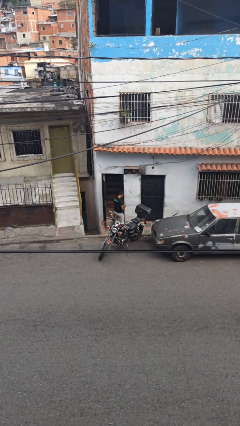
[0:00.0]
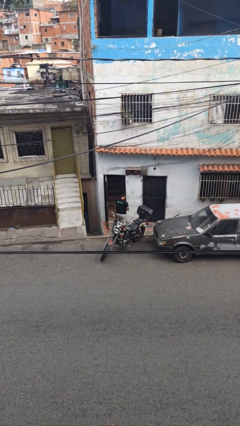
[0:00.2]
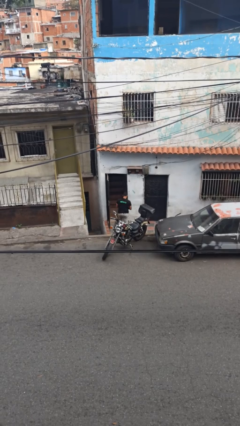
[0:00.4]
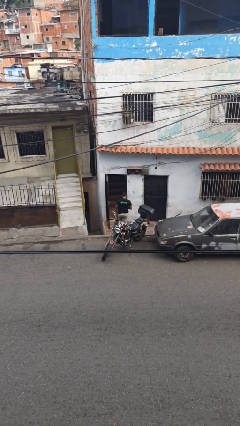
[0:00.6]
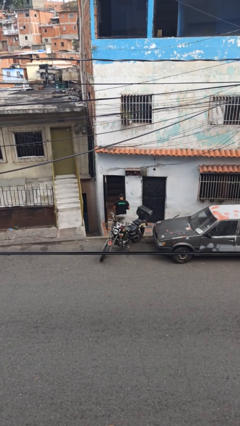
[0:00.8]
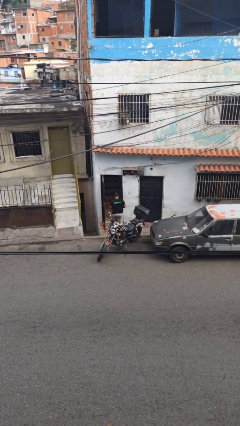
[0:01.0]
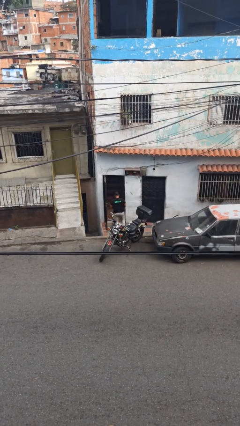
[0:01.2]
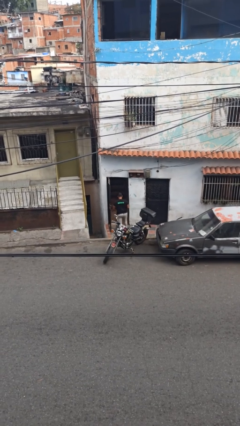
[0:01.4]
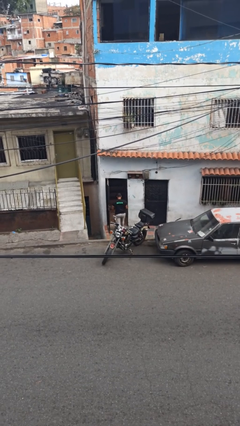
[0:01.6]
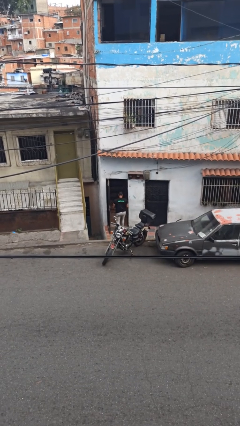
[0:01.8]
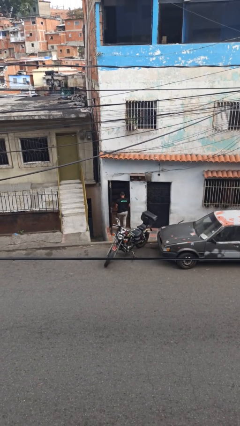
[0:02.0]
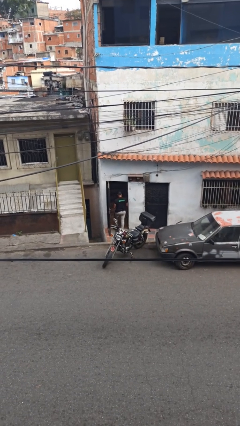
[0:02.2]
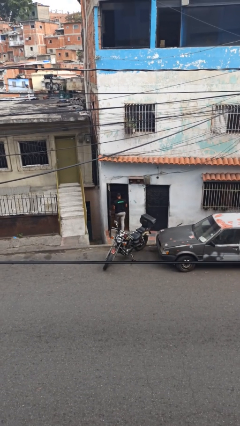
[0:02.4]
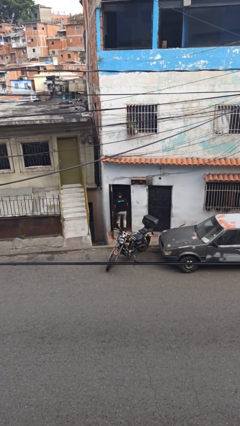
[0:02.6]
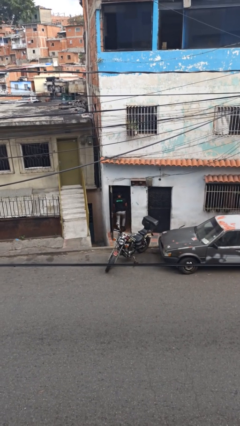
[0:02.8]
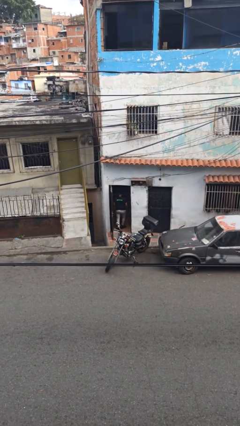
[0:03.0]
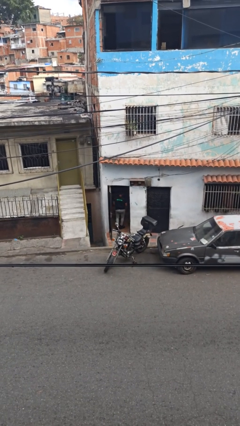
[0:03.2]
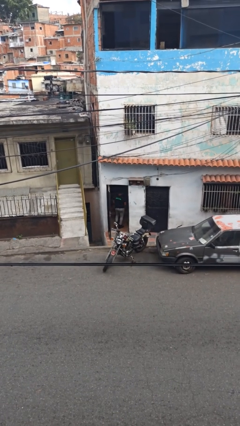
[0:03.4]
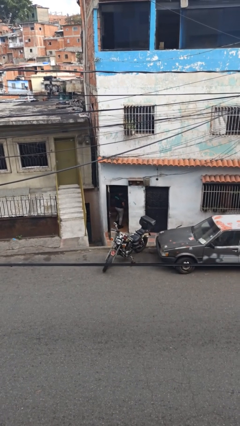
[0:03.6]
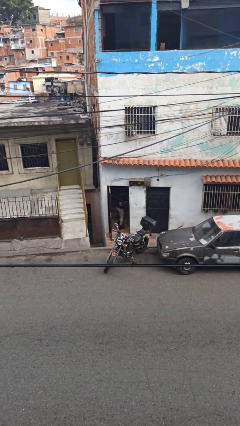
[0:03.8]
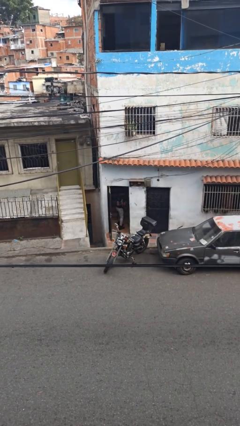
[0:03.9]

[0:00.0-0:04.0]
person exits scene through structure

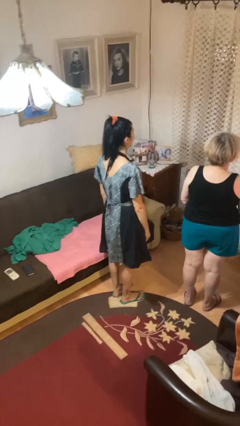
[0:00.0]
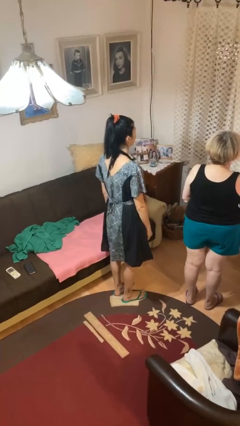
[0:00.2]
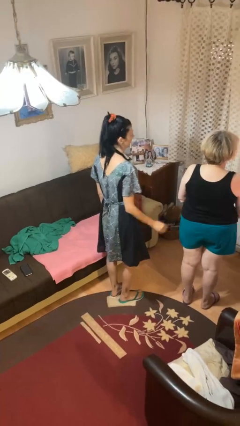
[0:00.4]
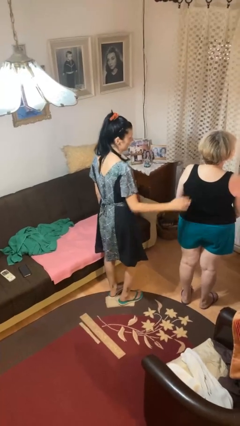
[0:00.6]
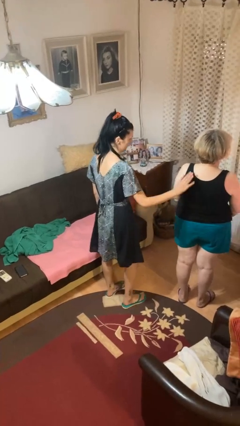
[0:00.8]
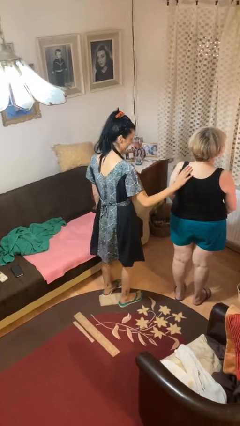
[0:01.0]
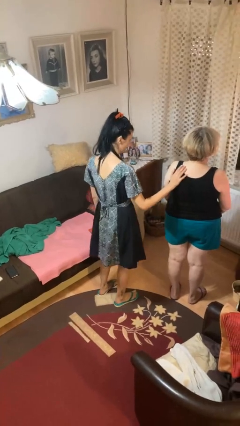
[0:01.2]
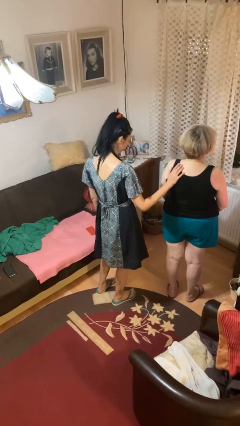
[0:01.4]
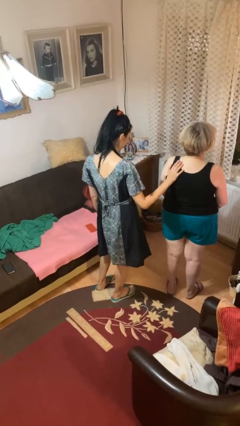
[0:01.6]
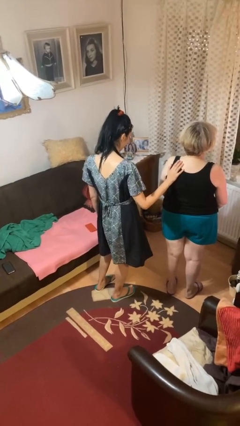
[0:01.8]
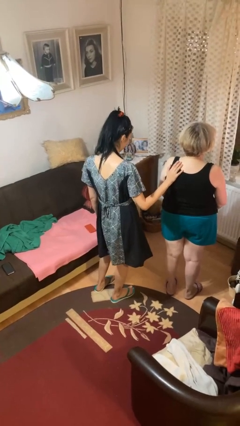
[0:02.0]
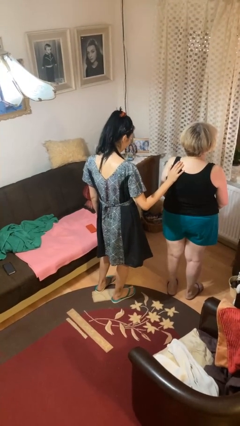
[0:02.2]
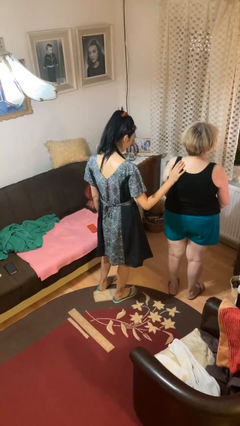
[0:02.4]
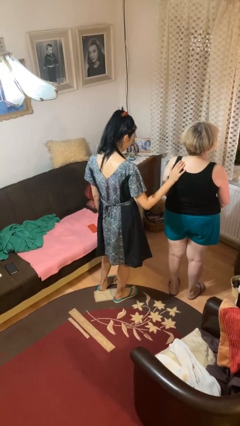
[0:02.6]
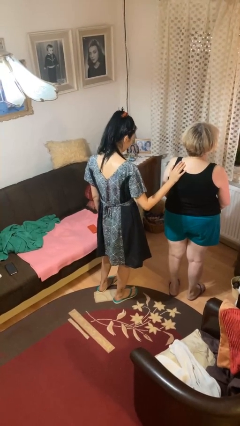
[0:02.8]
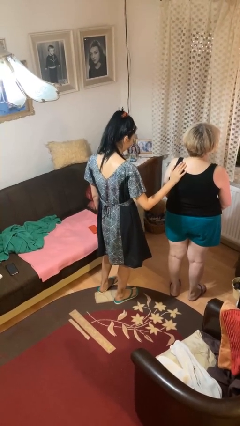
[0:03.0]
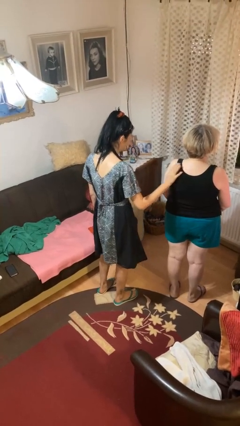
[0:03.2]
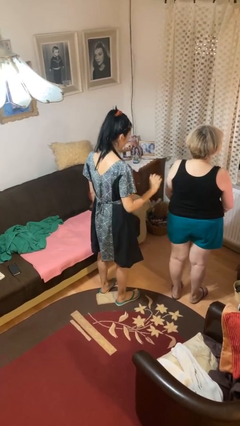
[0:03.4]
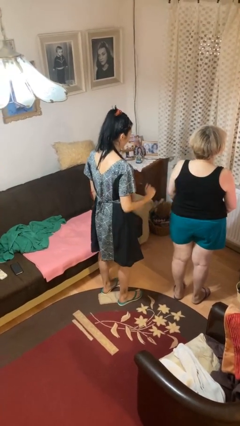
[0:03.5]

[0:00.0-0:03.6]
person touches back of person

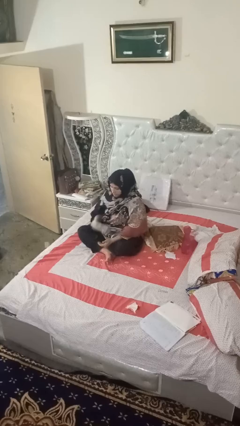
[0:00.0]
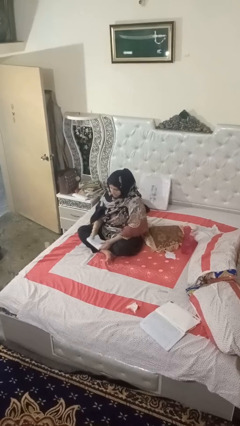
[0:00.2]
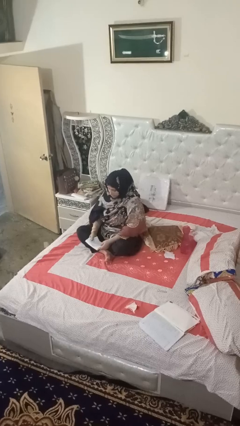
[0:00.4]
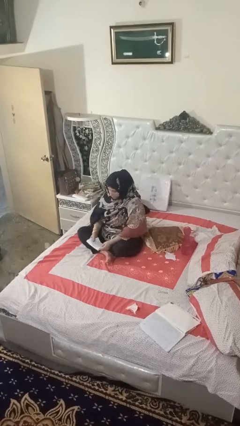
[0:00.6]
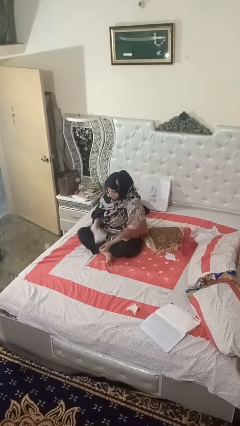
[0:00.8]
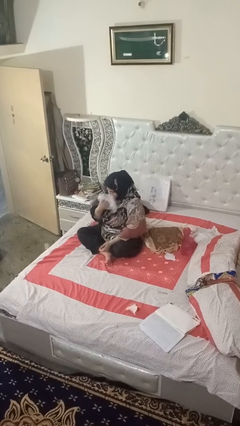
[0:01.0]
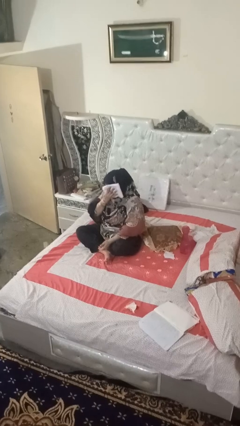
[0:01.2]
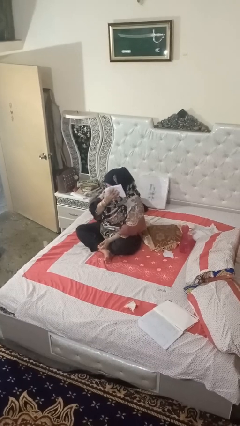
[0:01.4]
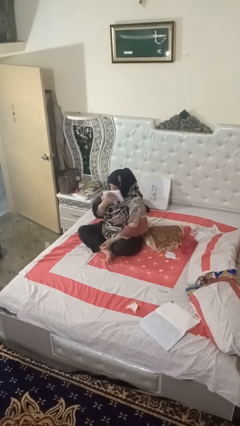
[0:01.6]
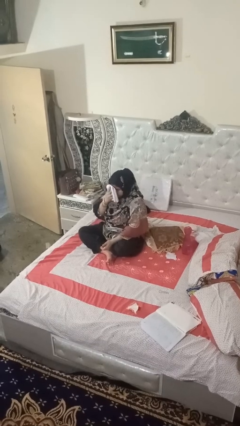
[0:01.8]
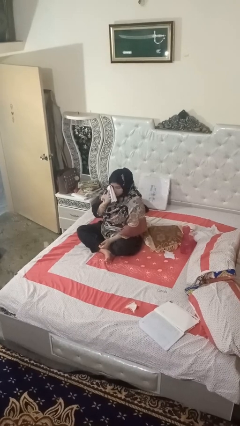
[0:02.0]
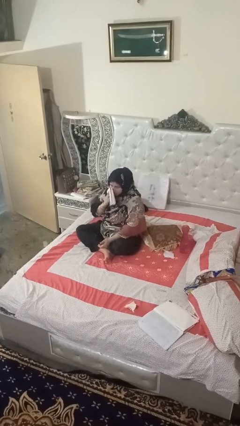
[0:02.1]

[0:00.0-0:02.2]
person wipes mouth with napkin

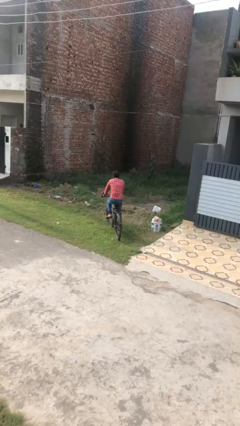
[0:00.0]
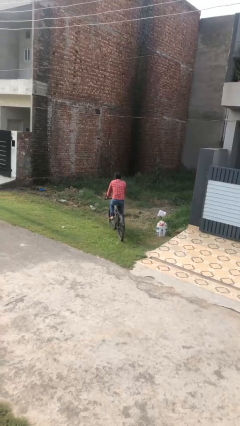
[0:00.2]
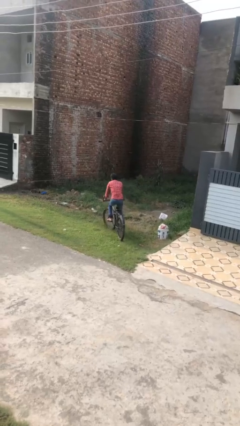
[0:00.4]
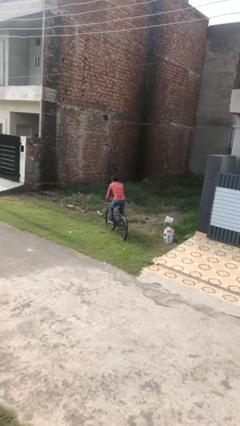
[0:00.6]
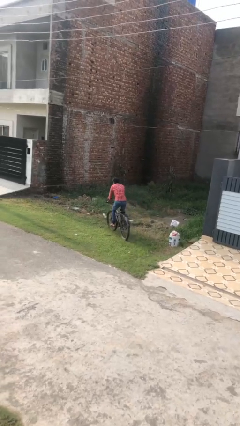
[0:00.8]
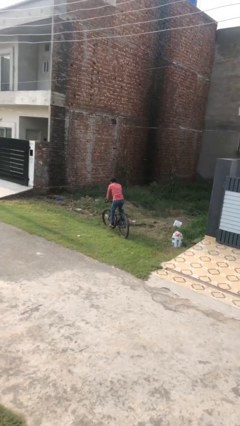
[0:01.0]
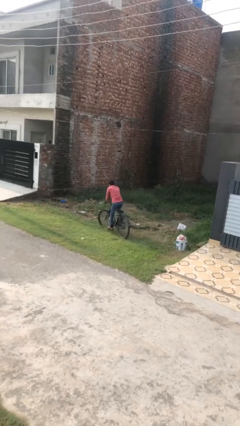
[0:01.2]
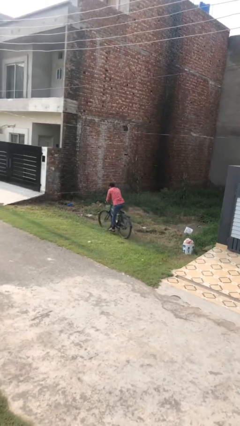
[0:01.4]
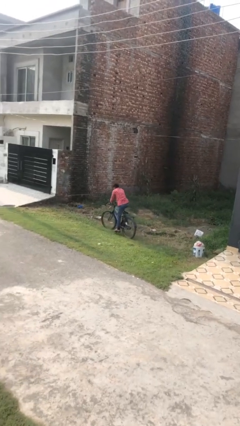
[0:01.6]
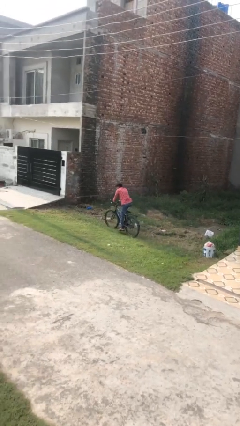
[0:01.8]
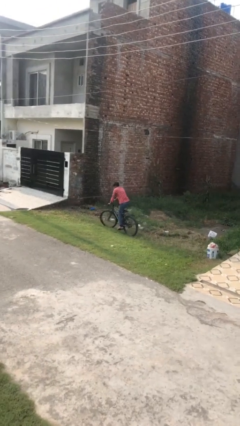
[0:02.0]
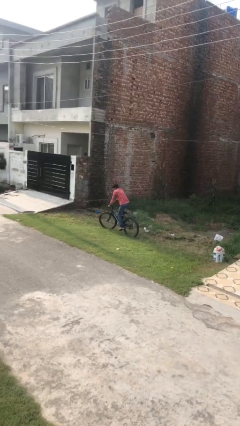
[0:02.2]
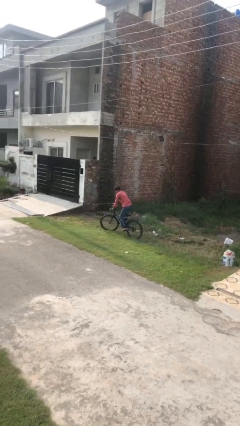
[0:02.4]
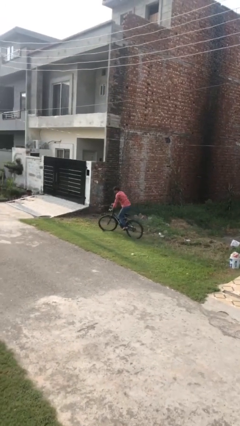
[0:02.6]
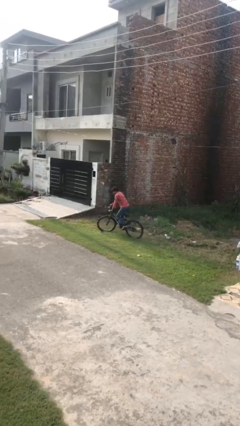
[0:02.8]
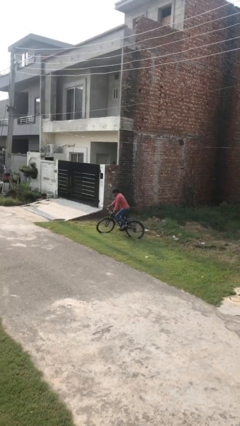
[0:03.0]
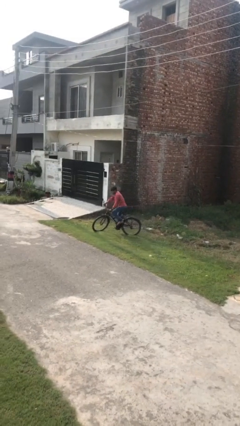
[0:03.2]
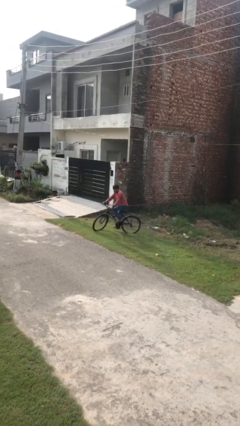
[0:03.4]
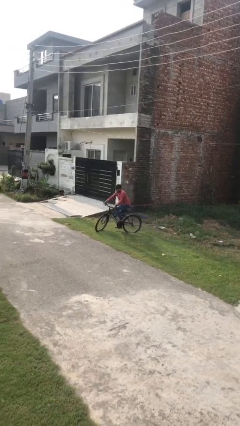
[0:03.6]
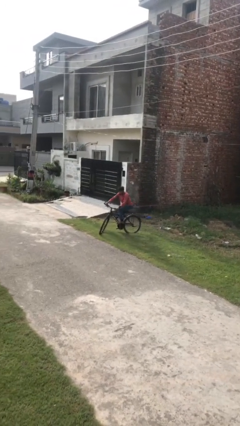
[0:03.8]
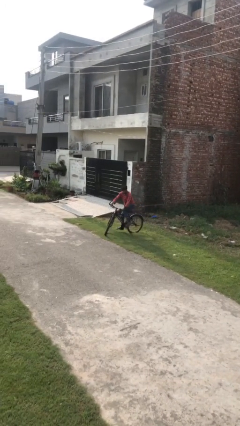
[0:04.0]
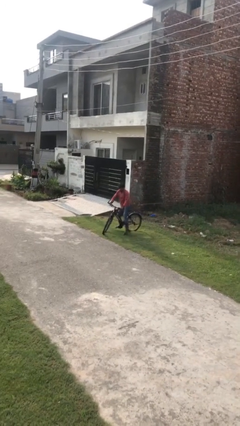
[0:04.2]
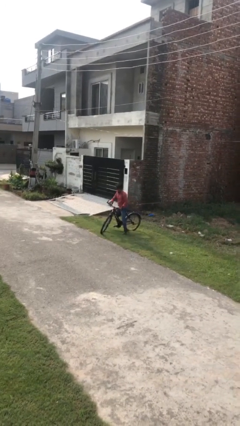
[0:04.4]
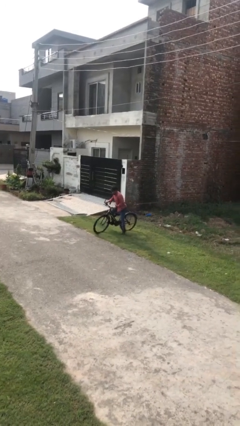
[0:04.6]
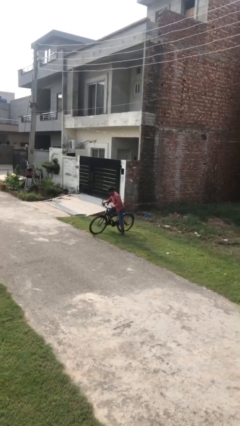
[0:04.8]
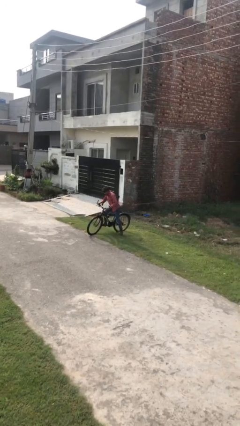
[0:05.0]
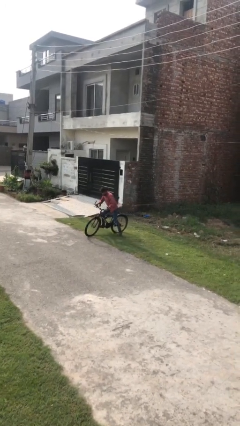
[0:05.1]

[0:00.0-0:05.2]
person rides bicycle

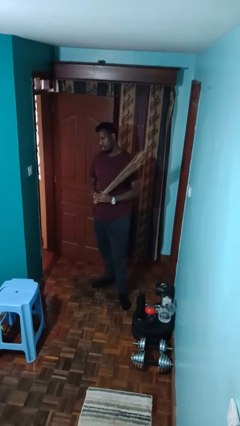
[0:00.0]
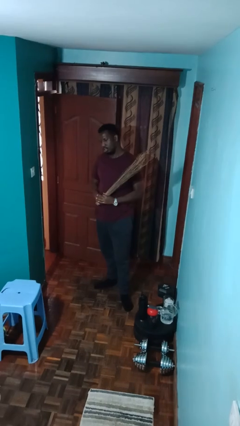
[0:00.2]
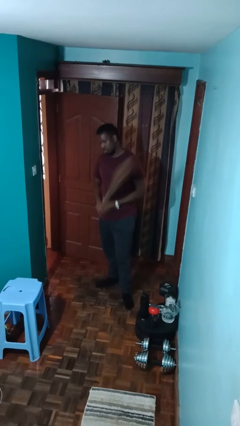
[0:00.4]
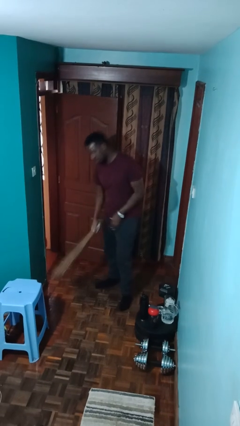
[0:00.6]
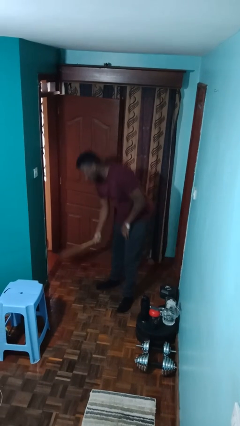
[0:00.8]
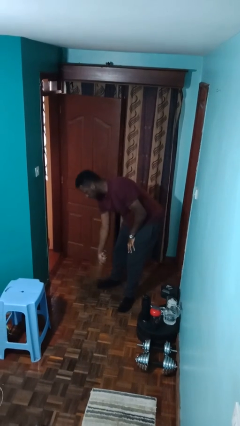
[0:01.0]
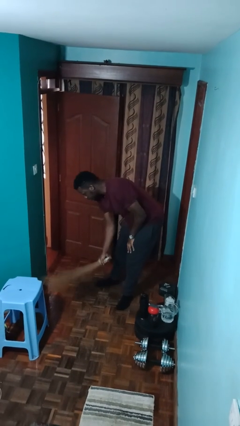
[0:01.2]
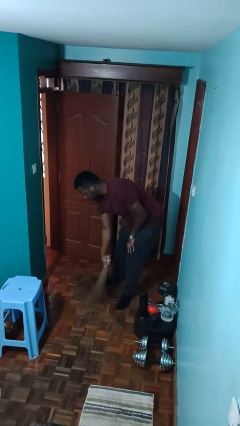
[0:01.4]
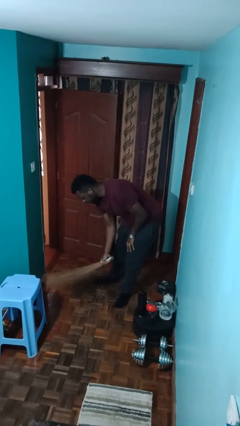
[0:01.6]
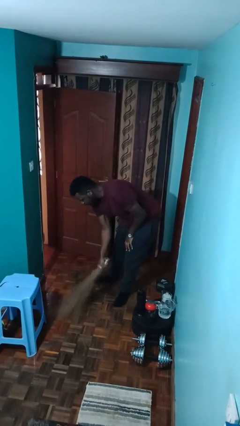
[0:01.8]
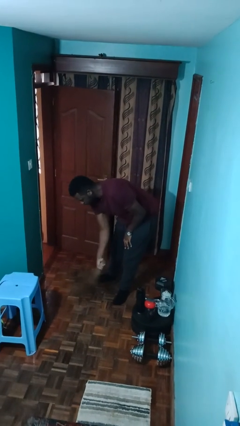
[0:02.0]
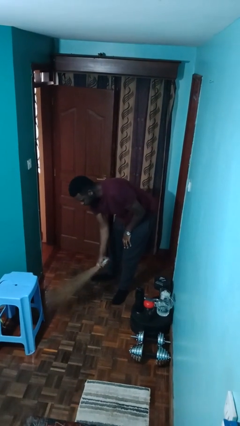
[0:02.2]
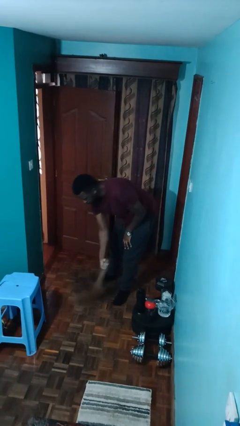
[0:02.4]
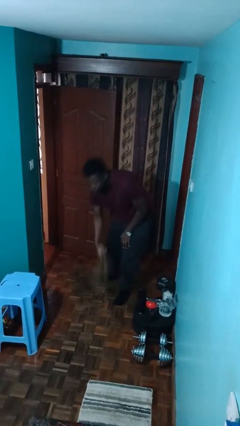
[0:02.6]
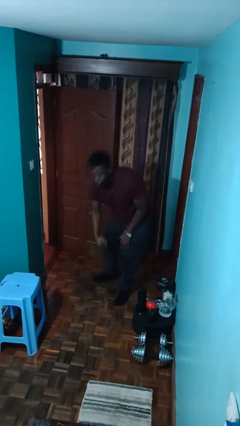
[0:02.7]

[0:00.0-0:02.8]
person sweeps floor
